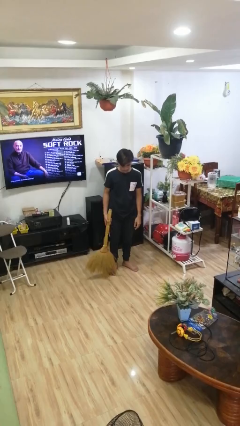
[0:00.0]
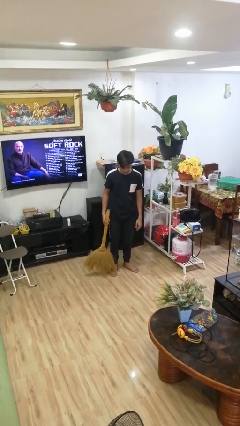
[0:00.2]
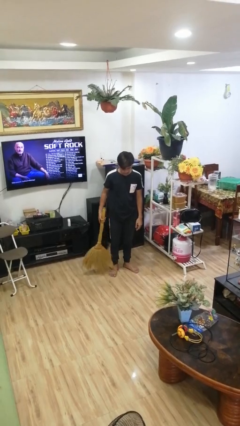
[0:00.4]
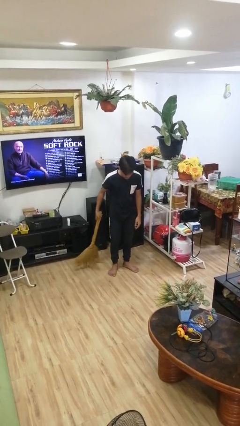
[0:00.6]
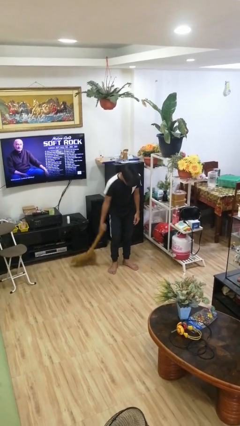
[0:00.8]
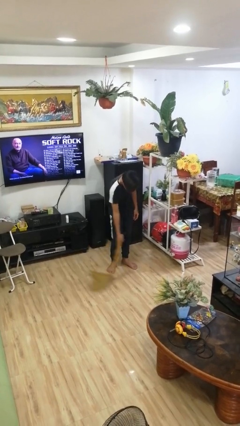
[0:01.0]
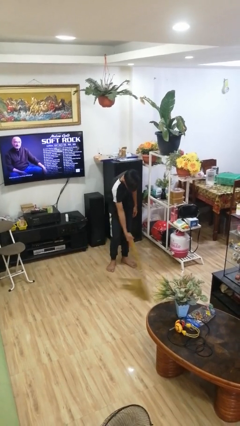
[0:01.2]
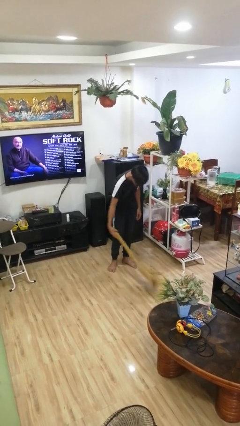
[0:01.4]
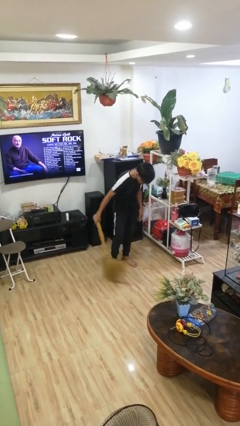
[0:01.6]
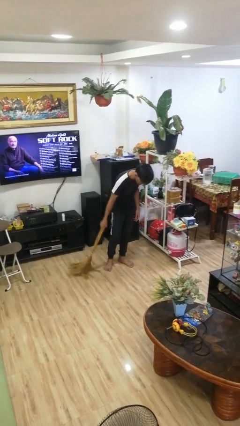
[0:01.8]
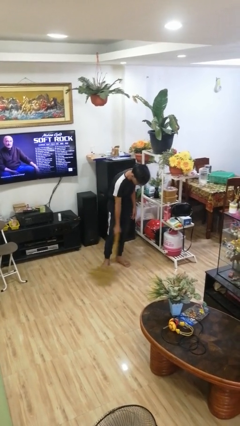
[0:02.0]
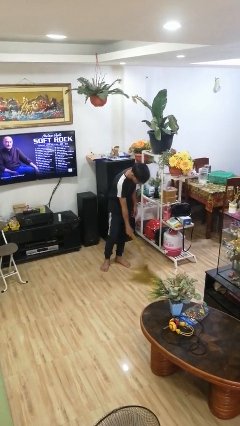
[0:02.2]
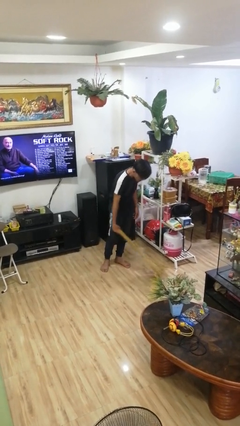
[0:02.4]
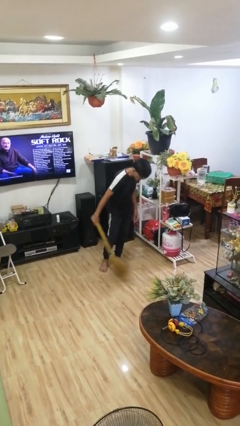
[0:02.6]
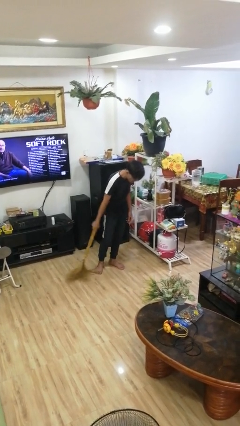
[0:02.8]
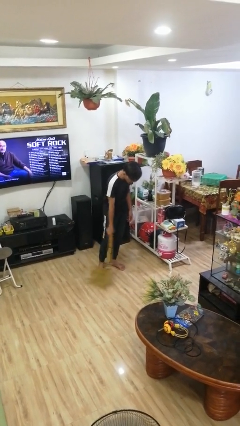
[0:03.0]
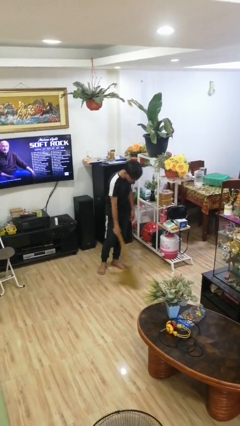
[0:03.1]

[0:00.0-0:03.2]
person sweeps floor

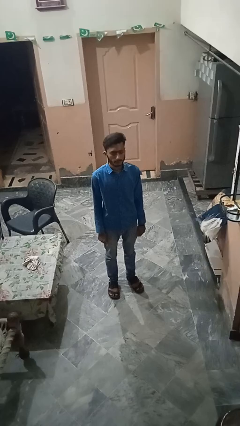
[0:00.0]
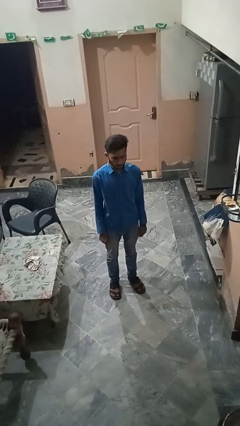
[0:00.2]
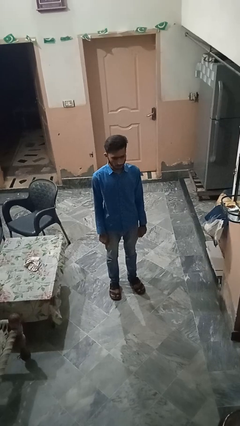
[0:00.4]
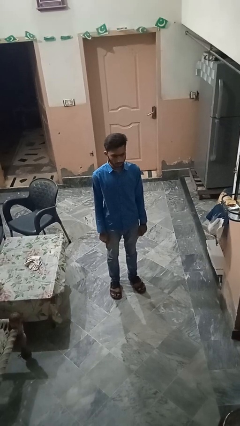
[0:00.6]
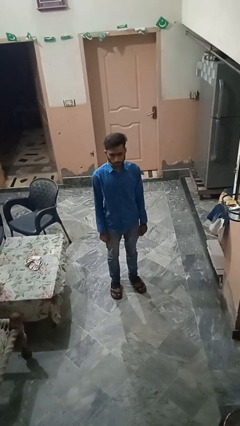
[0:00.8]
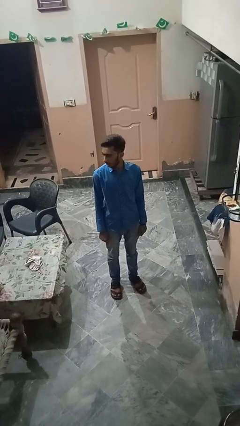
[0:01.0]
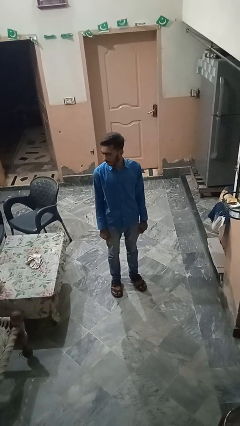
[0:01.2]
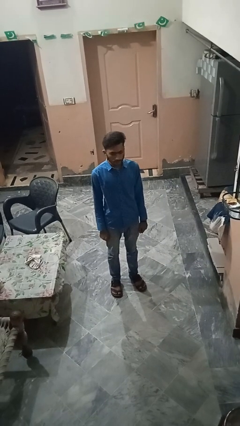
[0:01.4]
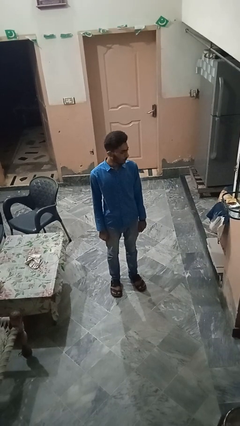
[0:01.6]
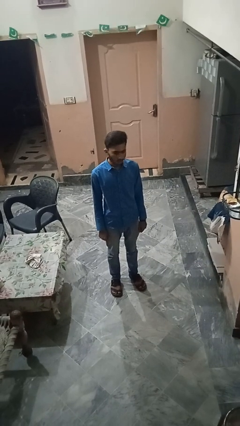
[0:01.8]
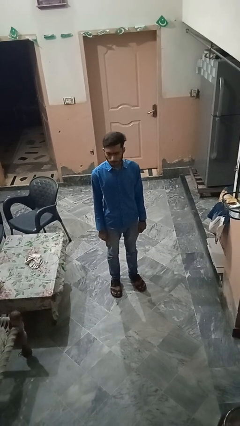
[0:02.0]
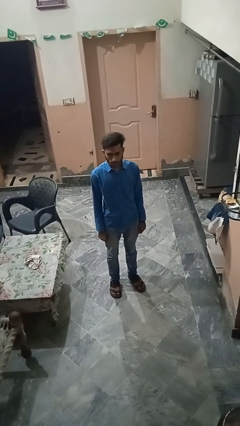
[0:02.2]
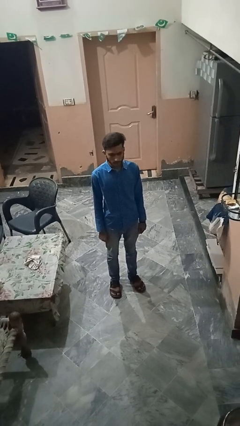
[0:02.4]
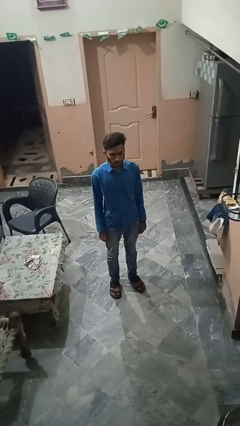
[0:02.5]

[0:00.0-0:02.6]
person shakes head

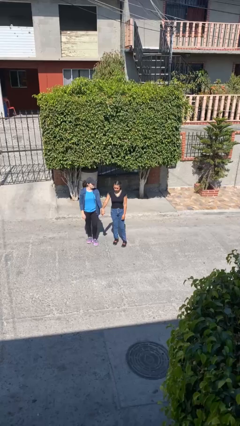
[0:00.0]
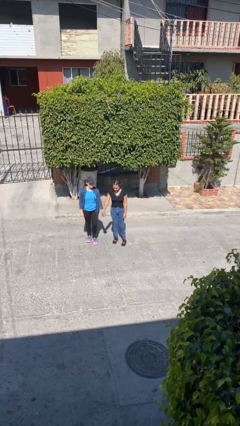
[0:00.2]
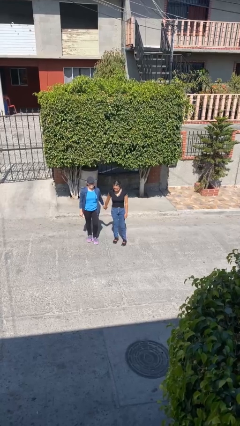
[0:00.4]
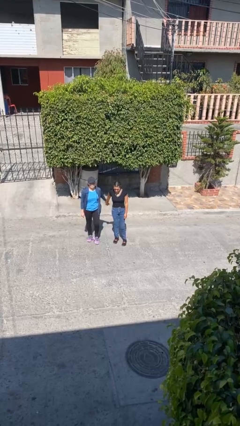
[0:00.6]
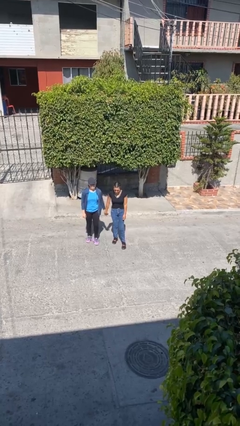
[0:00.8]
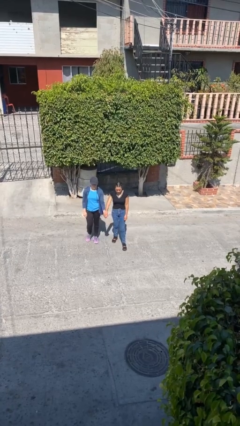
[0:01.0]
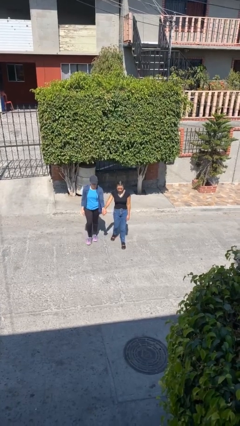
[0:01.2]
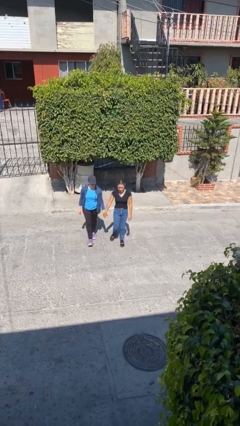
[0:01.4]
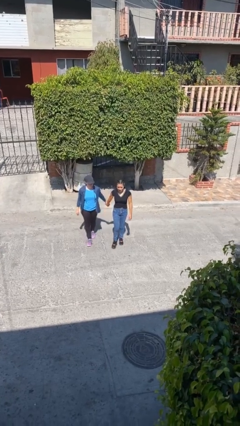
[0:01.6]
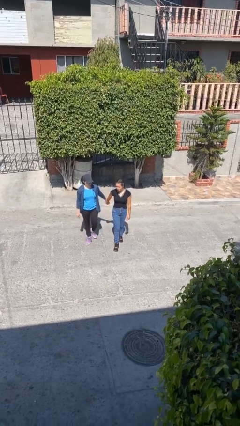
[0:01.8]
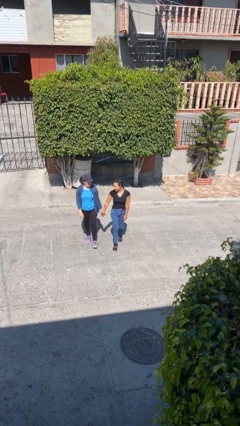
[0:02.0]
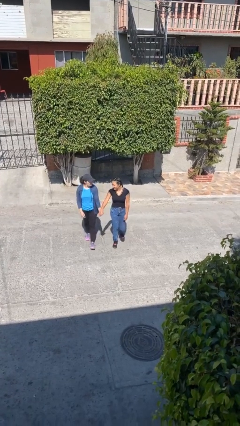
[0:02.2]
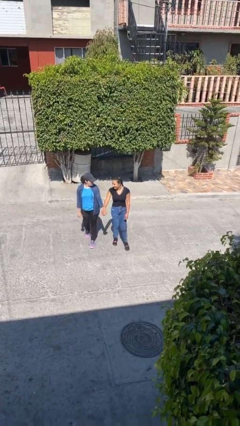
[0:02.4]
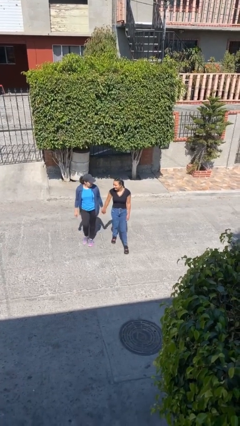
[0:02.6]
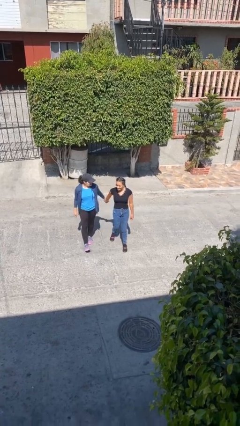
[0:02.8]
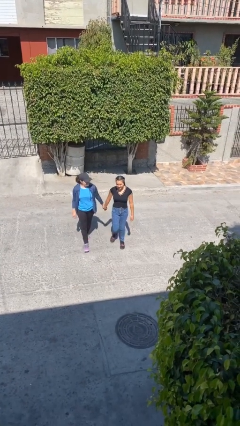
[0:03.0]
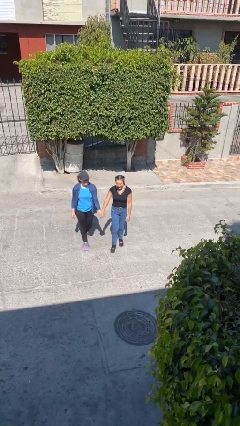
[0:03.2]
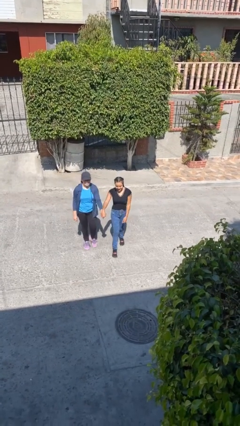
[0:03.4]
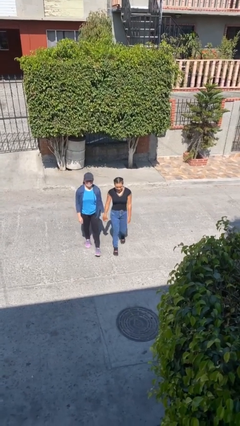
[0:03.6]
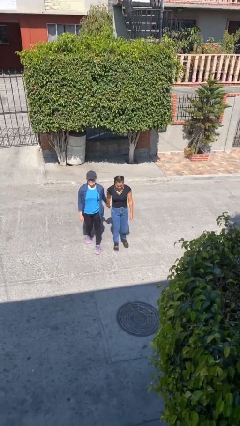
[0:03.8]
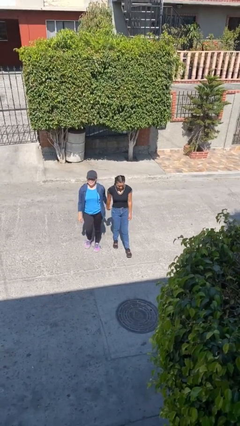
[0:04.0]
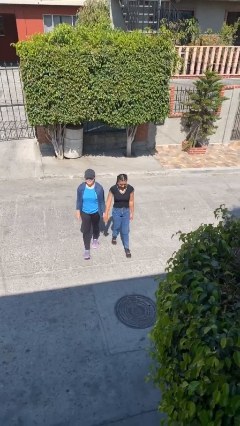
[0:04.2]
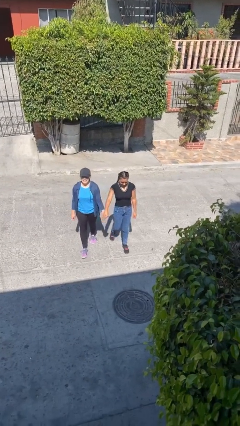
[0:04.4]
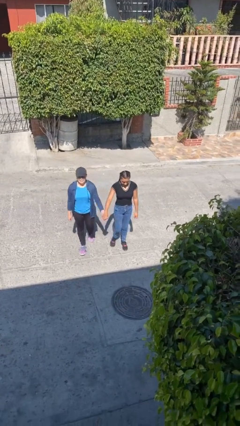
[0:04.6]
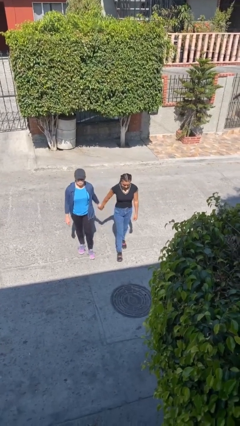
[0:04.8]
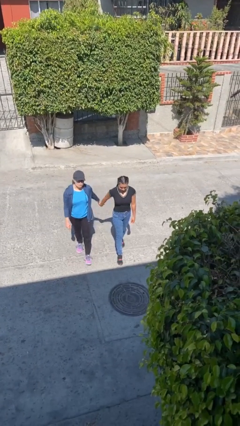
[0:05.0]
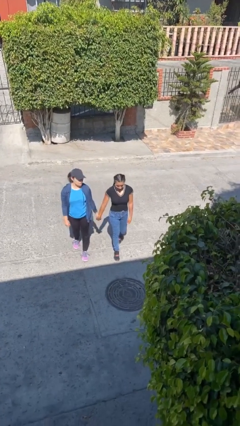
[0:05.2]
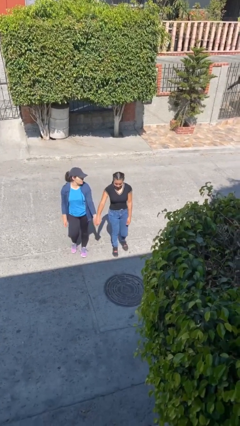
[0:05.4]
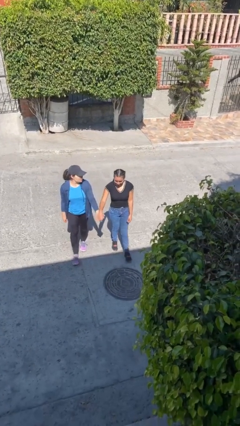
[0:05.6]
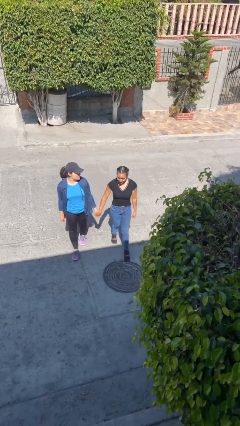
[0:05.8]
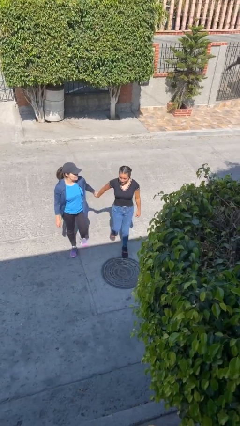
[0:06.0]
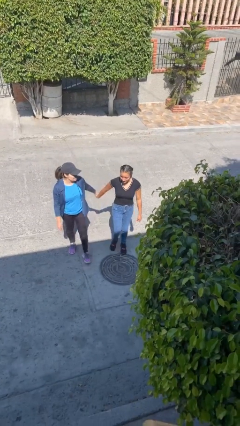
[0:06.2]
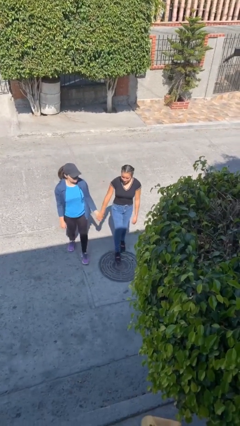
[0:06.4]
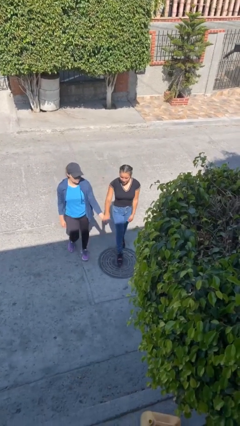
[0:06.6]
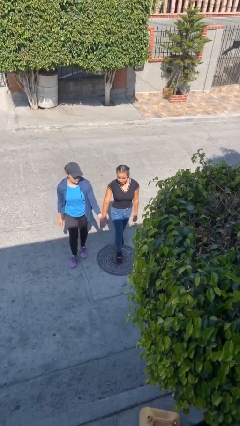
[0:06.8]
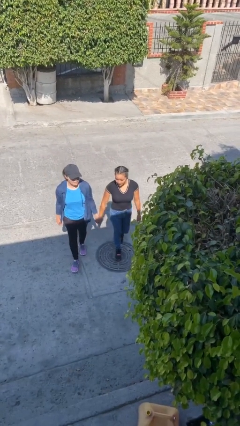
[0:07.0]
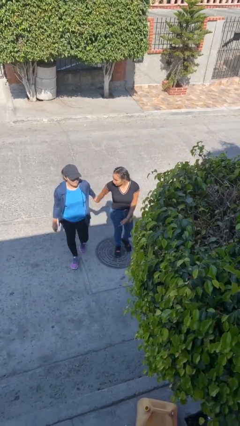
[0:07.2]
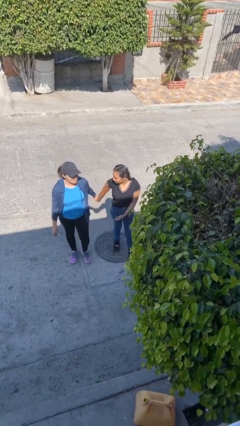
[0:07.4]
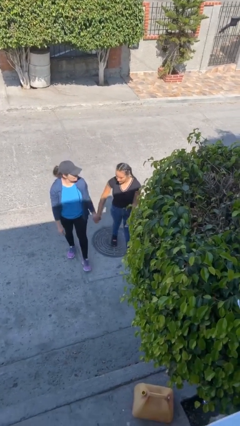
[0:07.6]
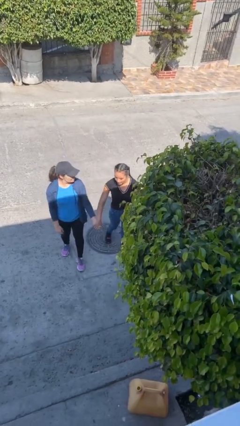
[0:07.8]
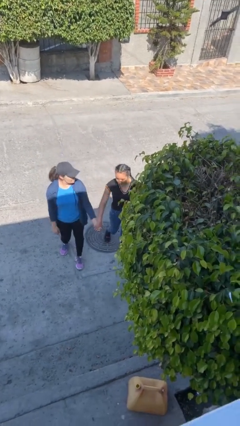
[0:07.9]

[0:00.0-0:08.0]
person holds hand

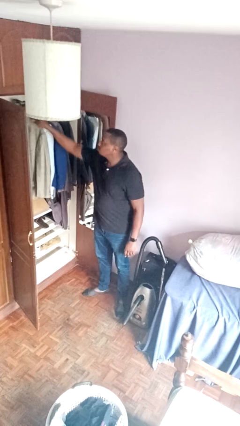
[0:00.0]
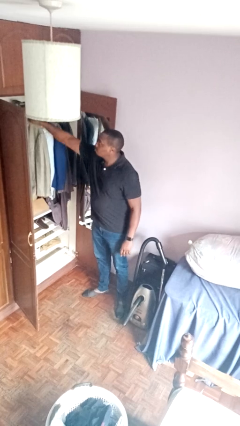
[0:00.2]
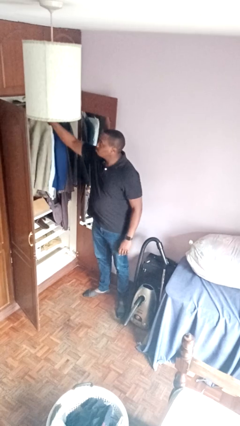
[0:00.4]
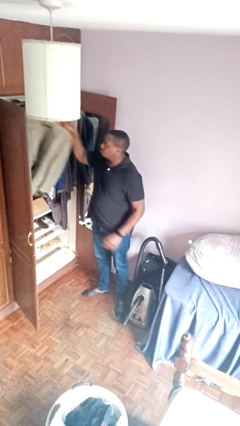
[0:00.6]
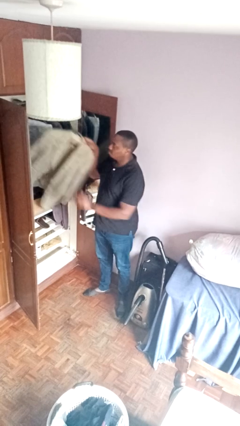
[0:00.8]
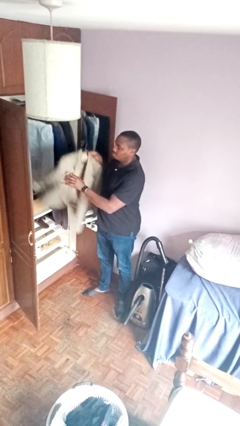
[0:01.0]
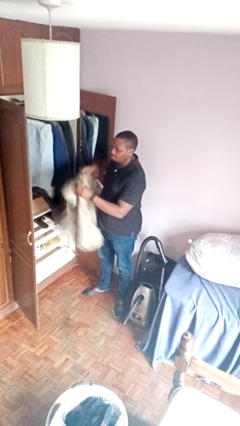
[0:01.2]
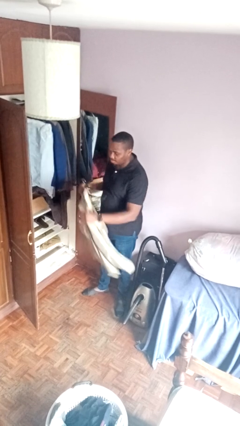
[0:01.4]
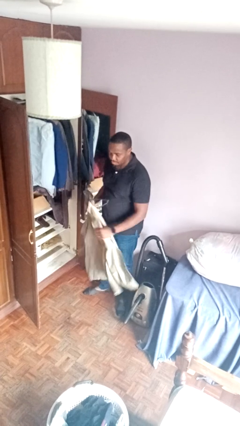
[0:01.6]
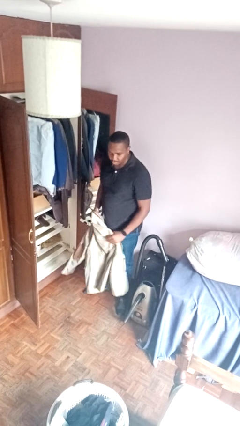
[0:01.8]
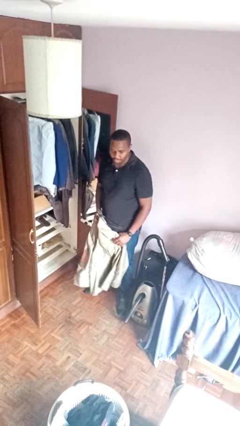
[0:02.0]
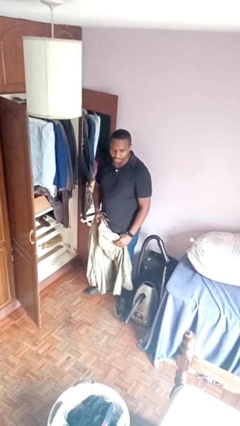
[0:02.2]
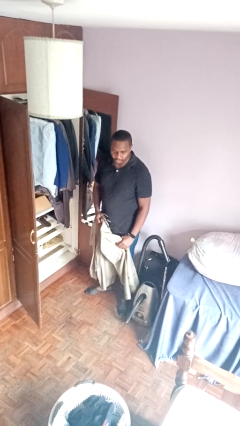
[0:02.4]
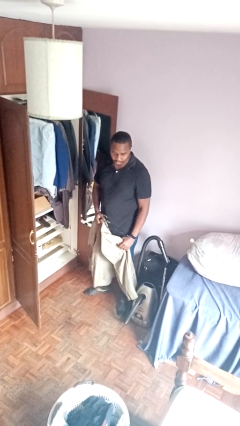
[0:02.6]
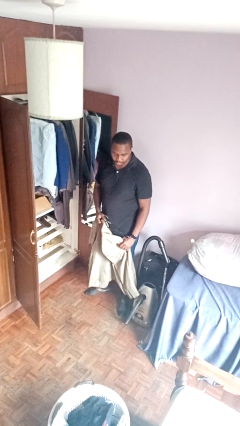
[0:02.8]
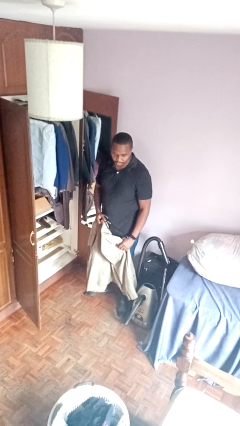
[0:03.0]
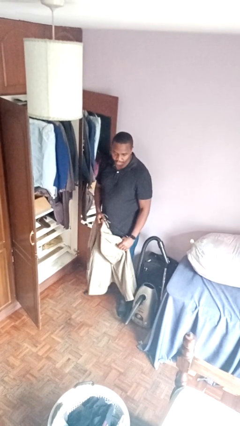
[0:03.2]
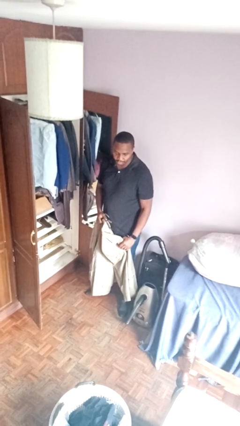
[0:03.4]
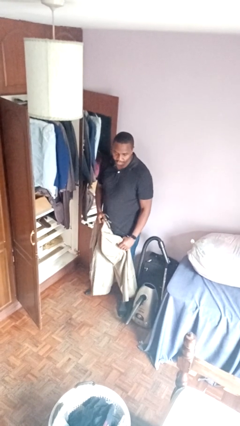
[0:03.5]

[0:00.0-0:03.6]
person takes clothes from closet

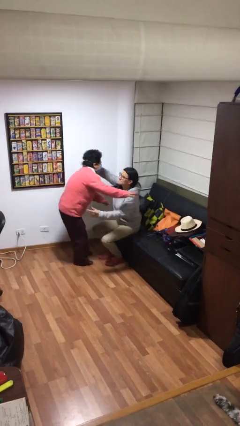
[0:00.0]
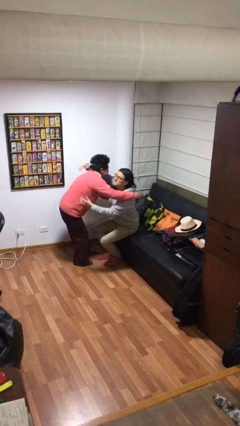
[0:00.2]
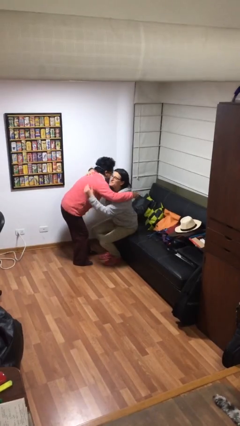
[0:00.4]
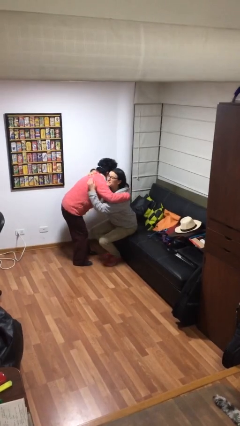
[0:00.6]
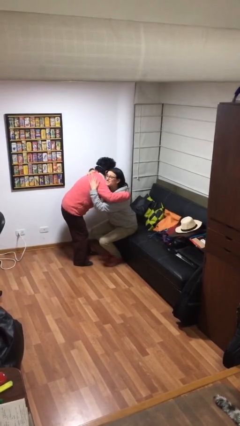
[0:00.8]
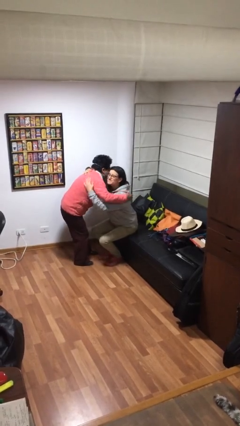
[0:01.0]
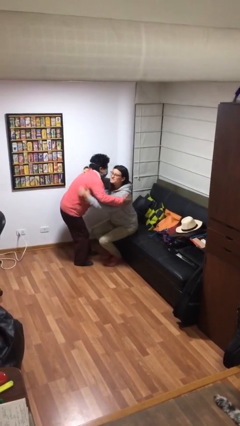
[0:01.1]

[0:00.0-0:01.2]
person embraces person
